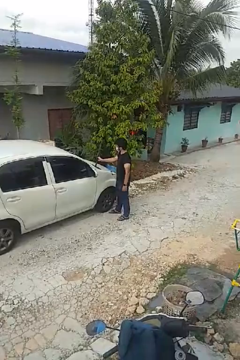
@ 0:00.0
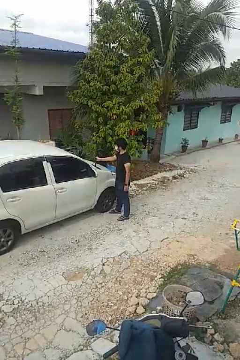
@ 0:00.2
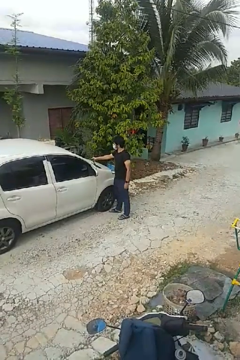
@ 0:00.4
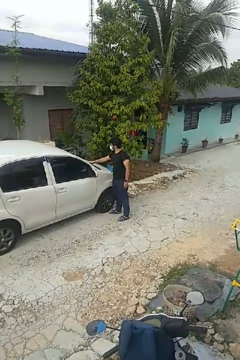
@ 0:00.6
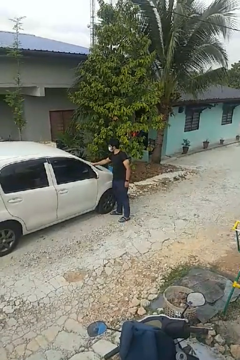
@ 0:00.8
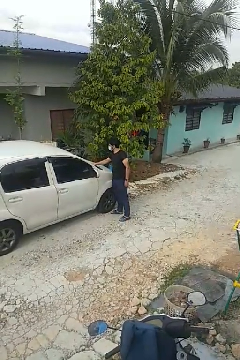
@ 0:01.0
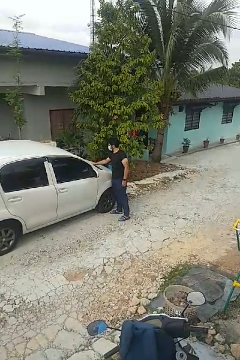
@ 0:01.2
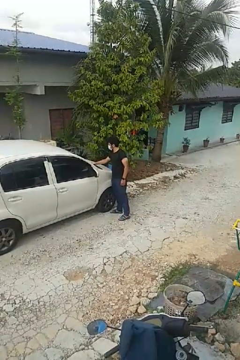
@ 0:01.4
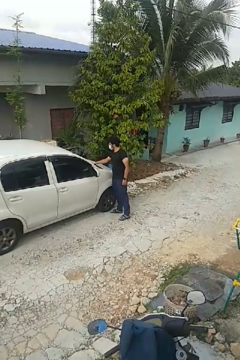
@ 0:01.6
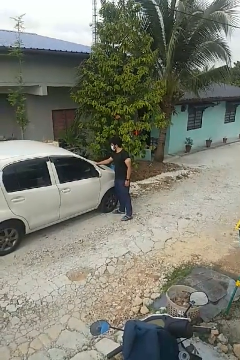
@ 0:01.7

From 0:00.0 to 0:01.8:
person flips down car wipers

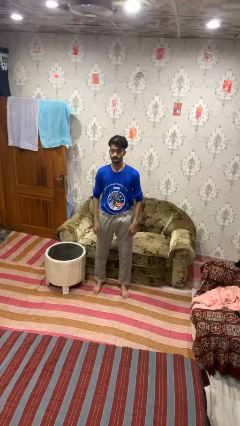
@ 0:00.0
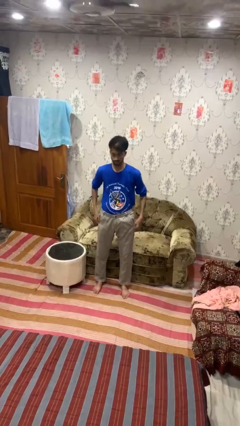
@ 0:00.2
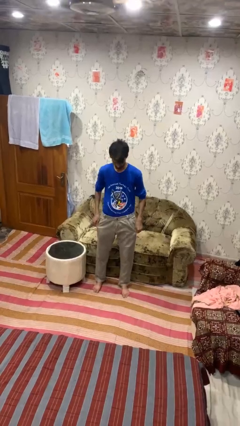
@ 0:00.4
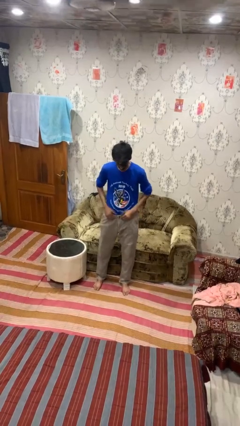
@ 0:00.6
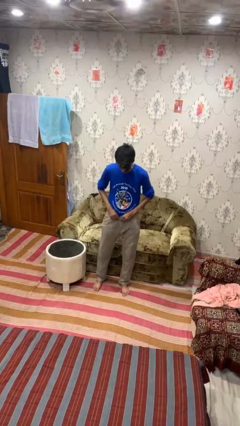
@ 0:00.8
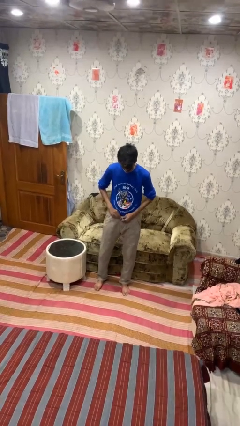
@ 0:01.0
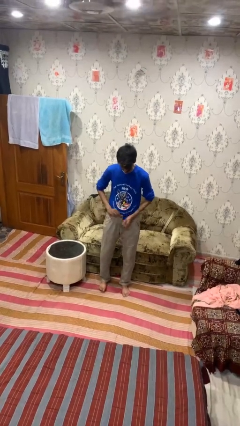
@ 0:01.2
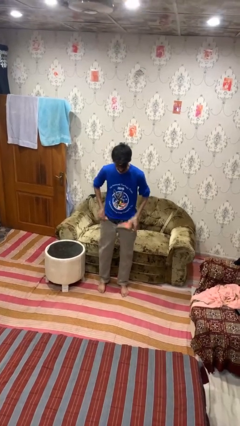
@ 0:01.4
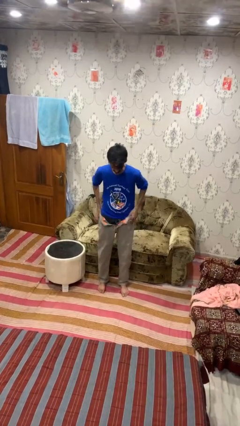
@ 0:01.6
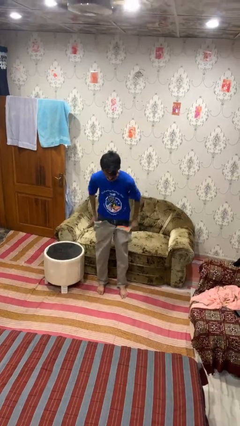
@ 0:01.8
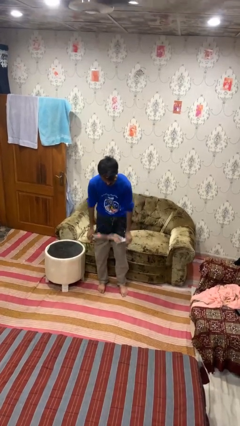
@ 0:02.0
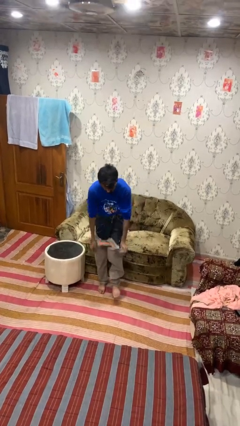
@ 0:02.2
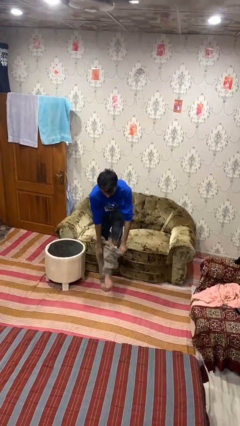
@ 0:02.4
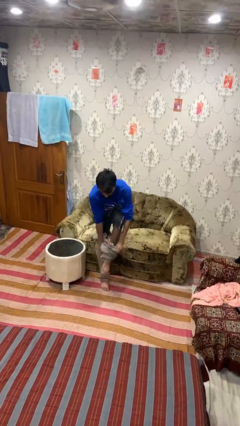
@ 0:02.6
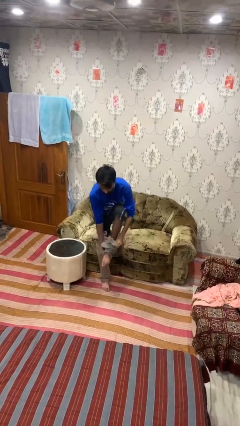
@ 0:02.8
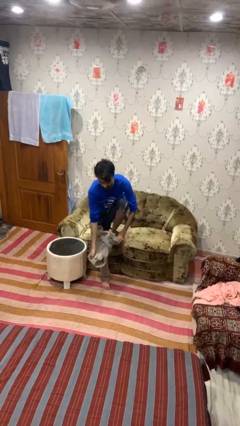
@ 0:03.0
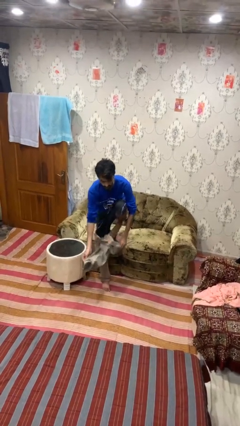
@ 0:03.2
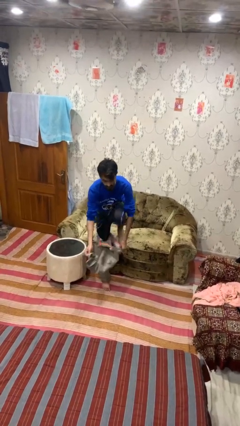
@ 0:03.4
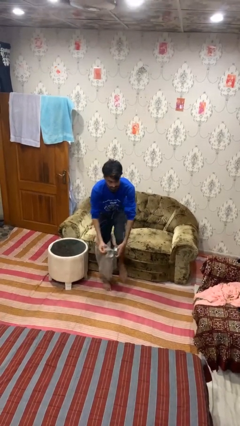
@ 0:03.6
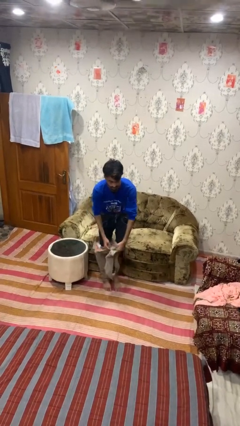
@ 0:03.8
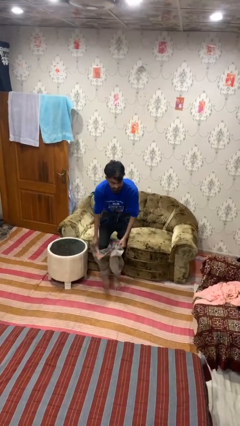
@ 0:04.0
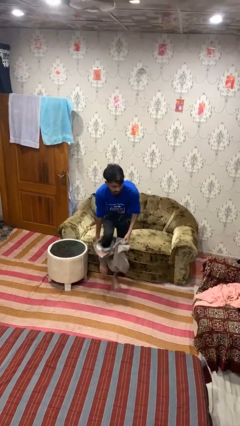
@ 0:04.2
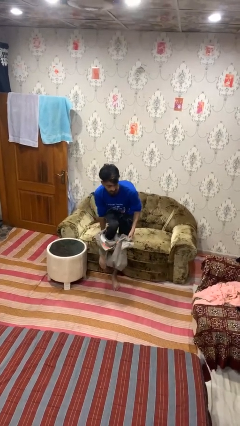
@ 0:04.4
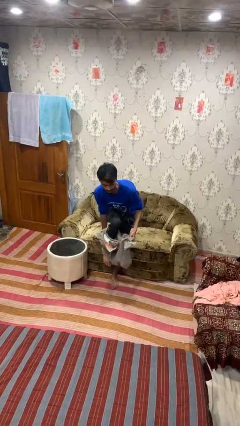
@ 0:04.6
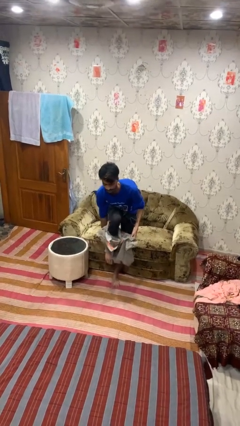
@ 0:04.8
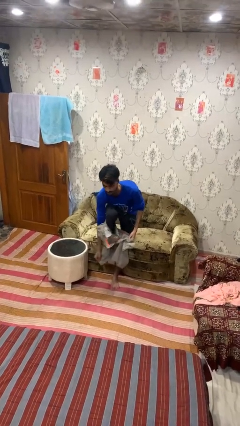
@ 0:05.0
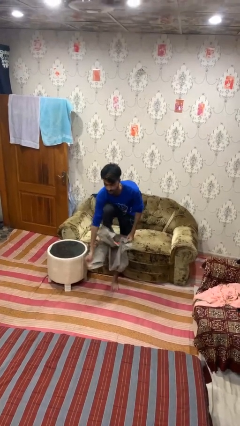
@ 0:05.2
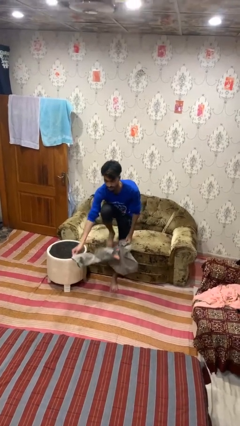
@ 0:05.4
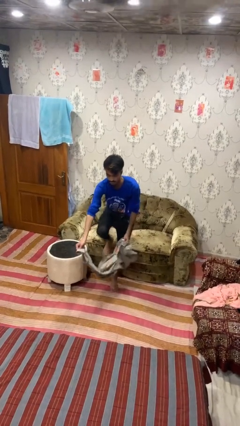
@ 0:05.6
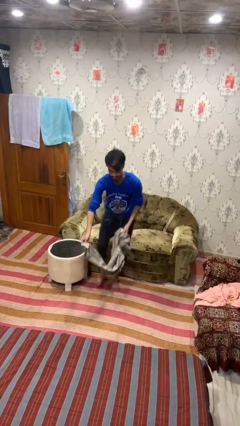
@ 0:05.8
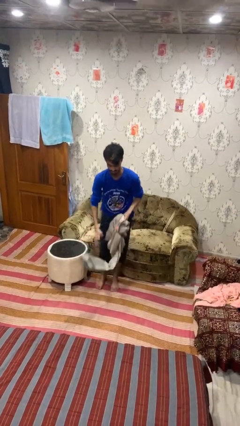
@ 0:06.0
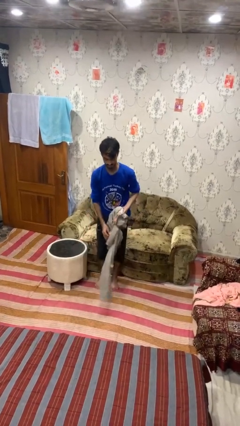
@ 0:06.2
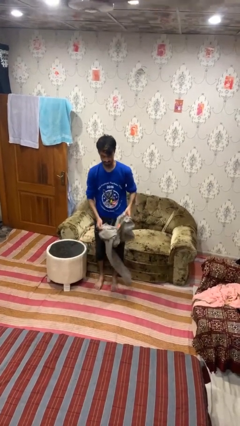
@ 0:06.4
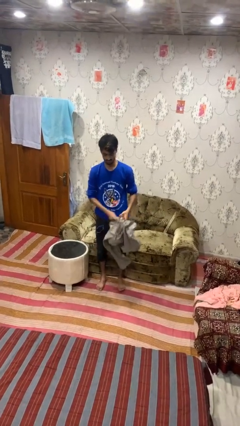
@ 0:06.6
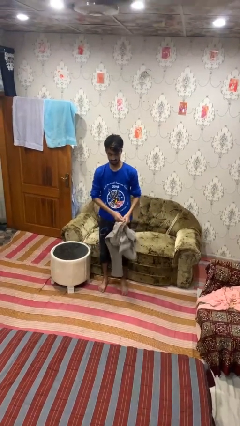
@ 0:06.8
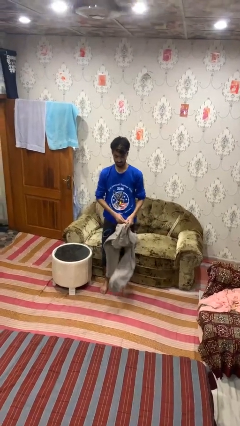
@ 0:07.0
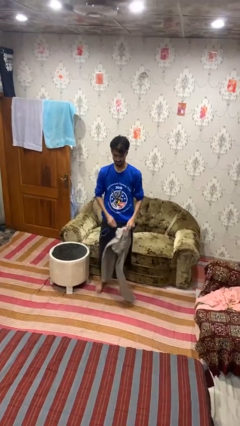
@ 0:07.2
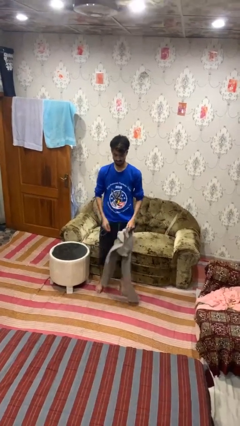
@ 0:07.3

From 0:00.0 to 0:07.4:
person takes off pants

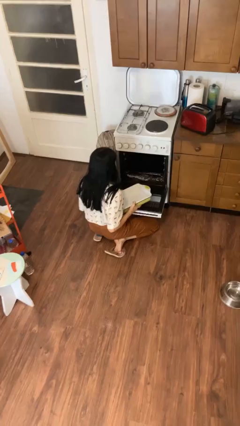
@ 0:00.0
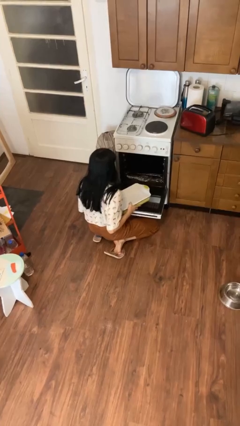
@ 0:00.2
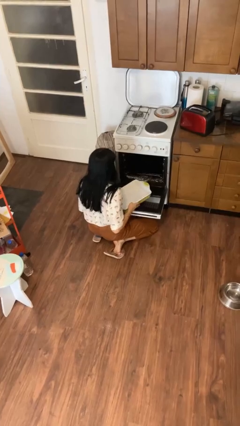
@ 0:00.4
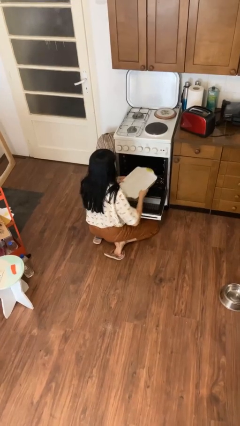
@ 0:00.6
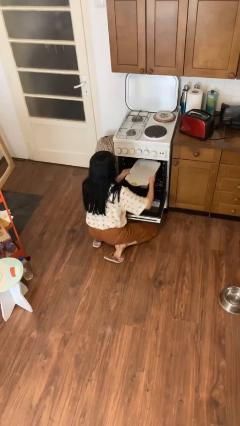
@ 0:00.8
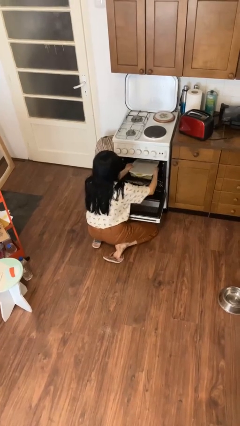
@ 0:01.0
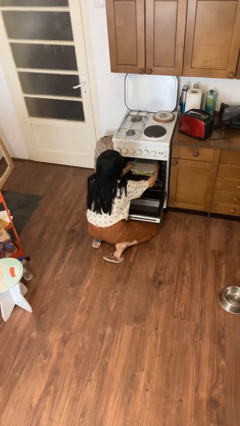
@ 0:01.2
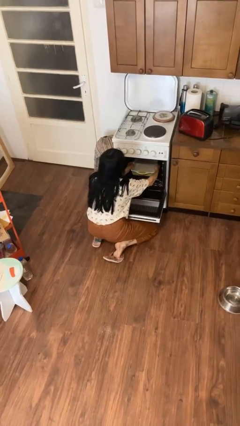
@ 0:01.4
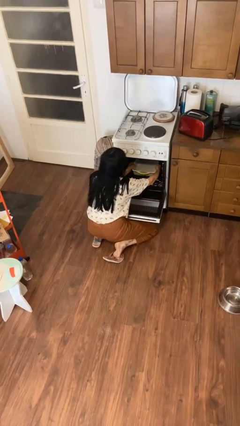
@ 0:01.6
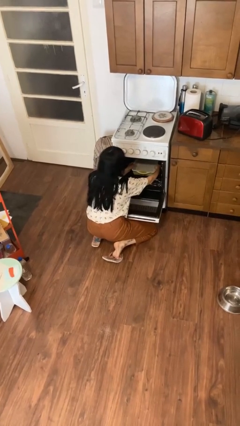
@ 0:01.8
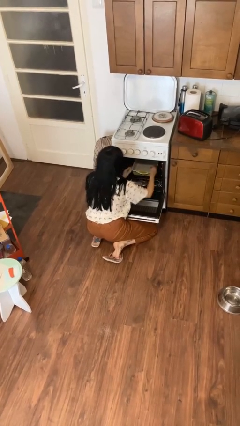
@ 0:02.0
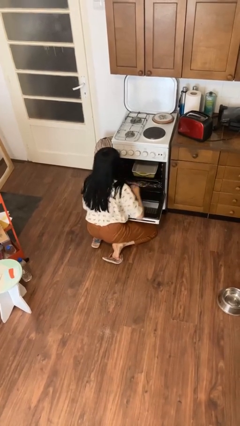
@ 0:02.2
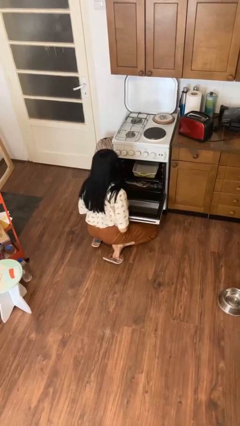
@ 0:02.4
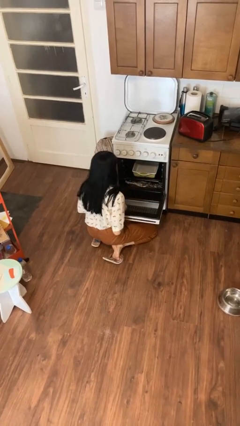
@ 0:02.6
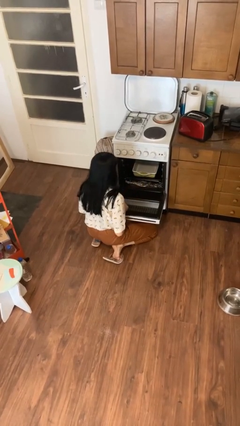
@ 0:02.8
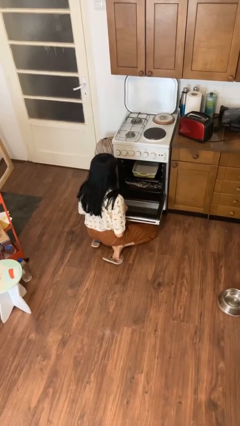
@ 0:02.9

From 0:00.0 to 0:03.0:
person puts object into oven

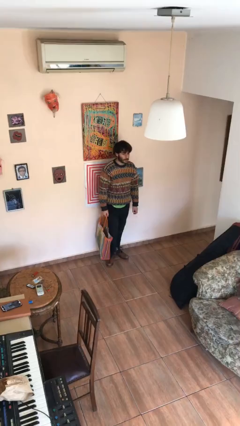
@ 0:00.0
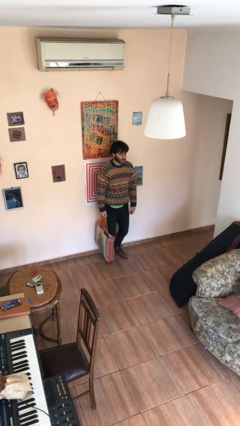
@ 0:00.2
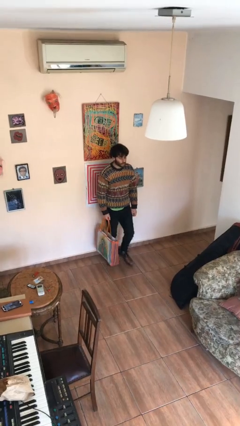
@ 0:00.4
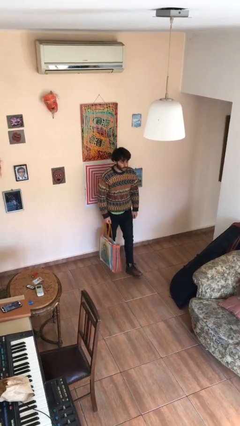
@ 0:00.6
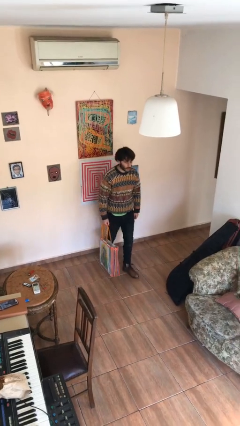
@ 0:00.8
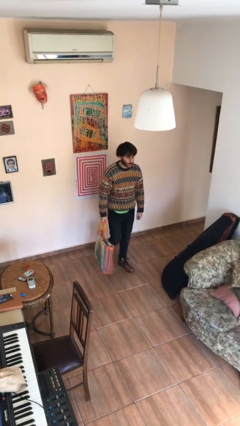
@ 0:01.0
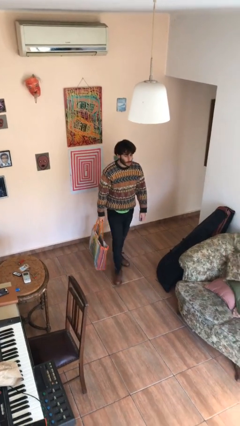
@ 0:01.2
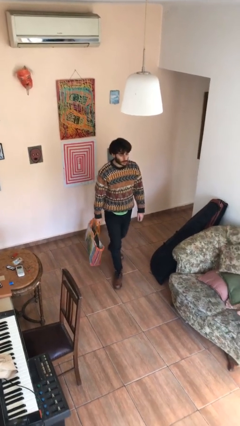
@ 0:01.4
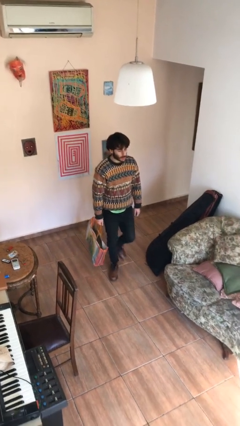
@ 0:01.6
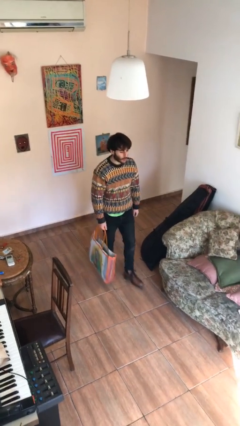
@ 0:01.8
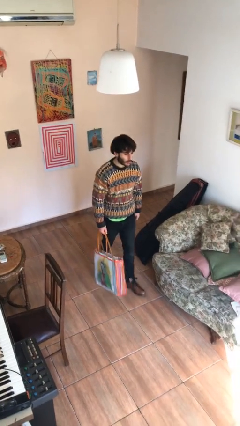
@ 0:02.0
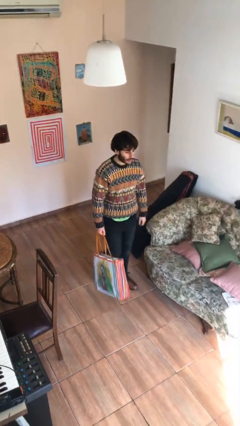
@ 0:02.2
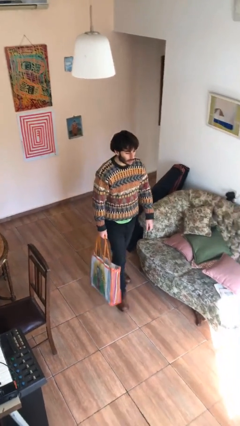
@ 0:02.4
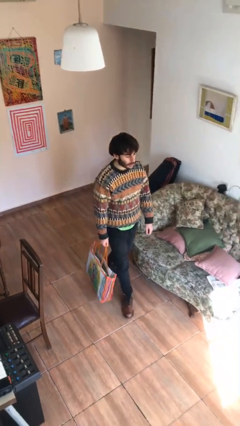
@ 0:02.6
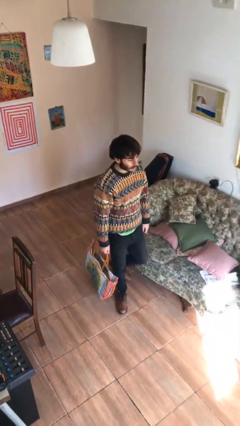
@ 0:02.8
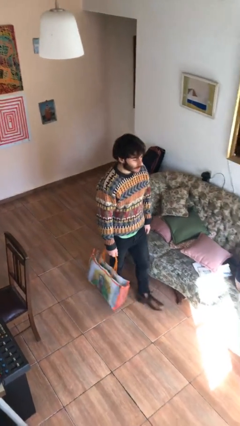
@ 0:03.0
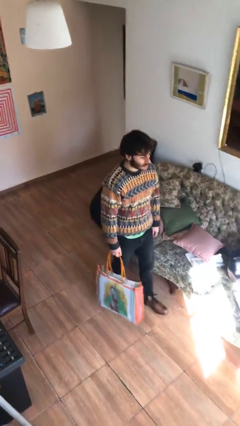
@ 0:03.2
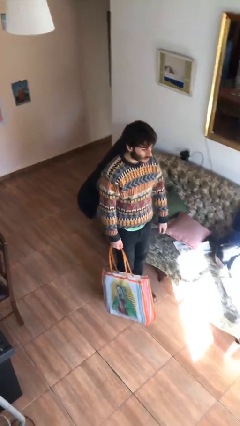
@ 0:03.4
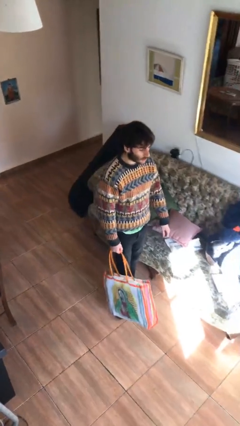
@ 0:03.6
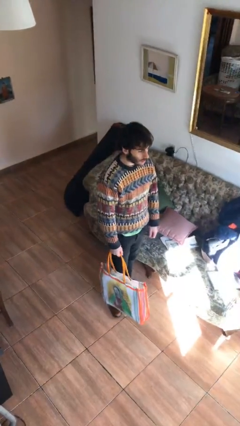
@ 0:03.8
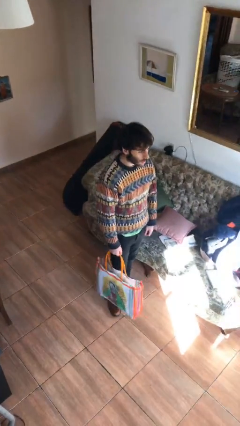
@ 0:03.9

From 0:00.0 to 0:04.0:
person carries groceries

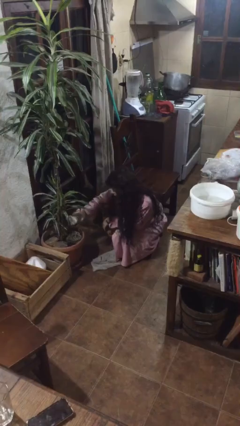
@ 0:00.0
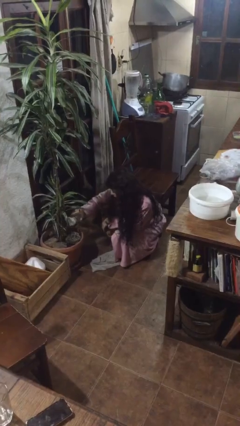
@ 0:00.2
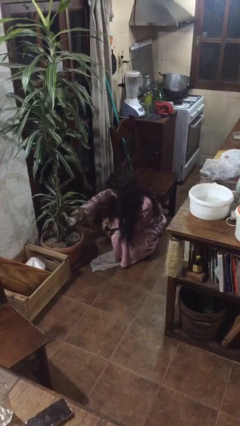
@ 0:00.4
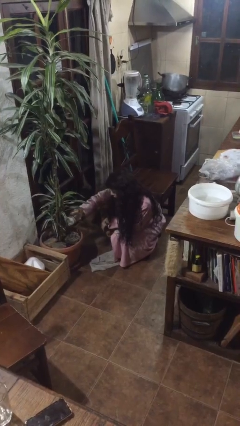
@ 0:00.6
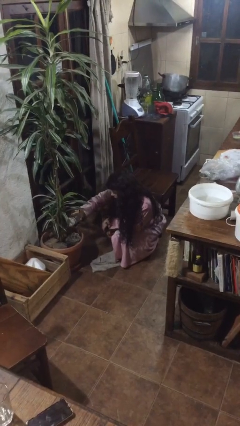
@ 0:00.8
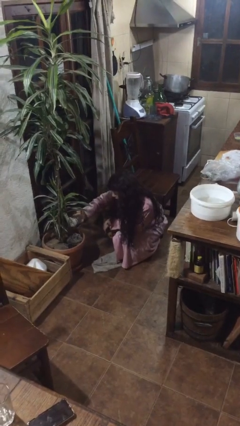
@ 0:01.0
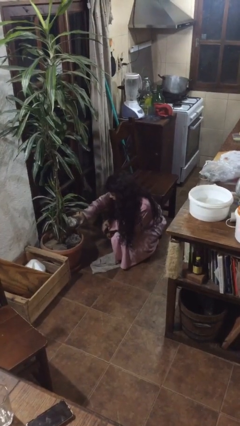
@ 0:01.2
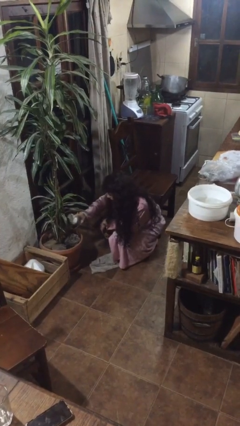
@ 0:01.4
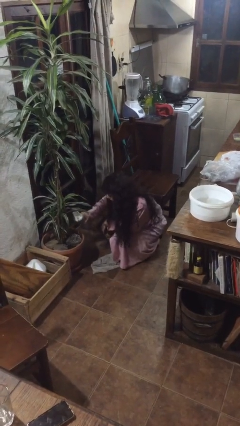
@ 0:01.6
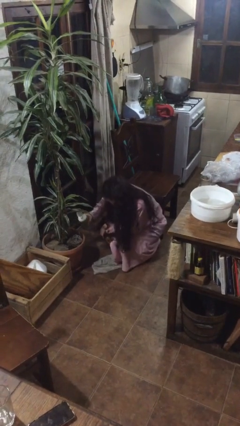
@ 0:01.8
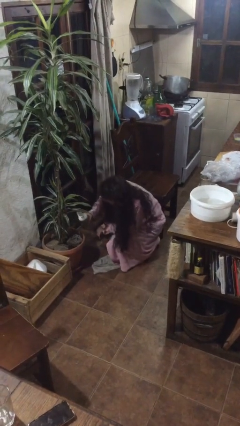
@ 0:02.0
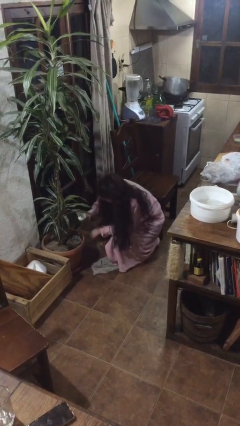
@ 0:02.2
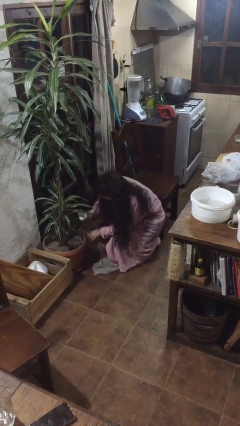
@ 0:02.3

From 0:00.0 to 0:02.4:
person waters houseplant
